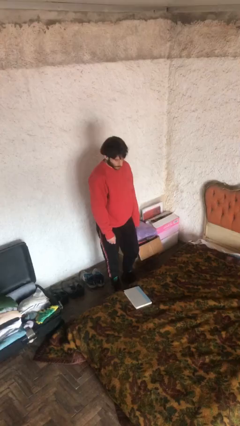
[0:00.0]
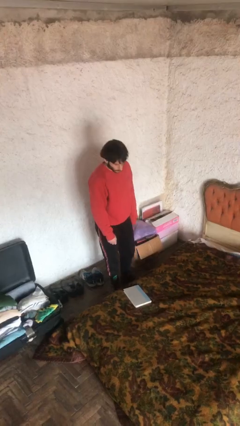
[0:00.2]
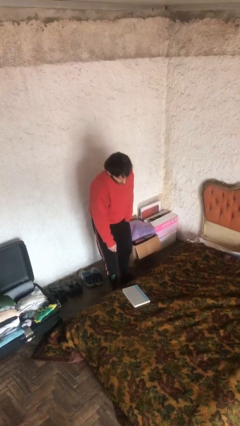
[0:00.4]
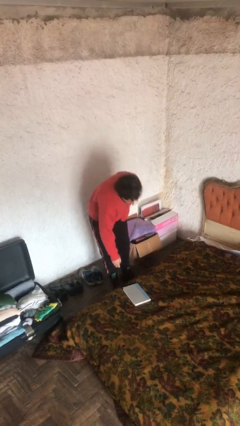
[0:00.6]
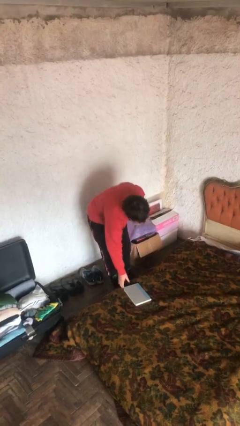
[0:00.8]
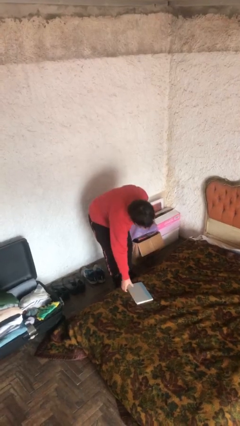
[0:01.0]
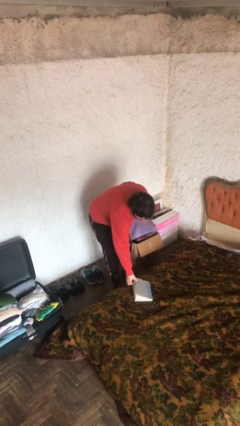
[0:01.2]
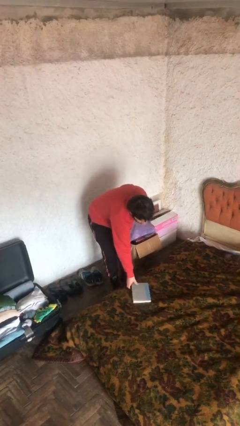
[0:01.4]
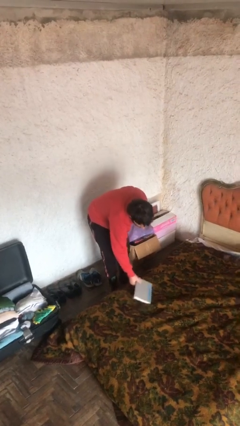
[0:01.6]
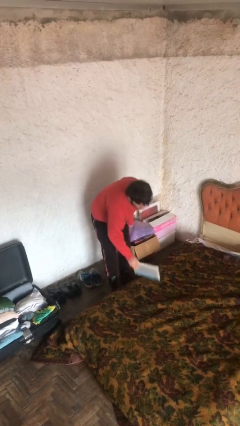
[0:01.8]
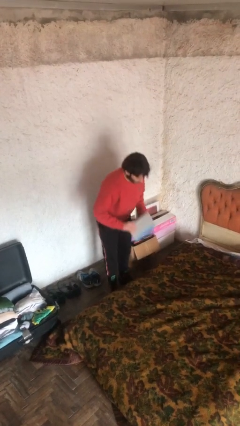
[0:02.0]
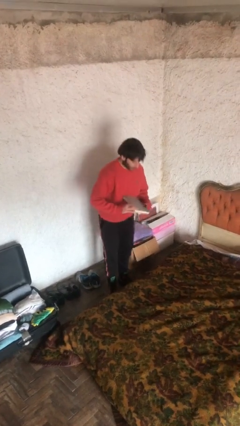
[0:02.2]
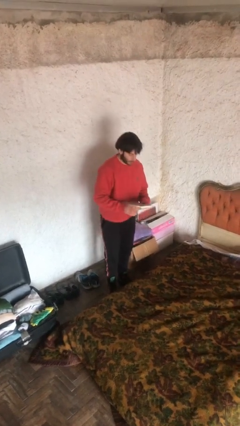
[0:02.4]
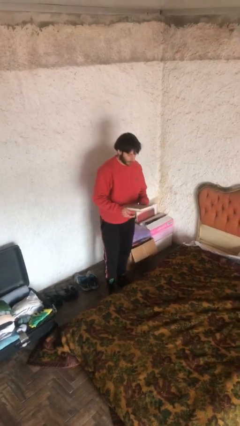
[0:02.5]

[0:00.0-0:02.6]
person picks up object from bed

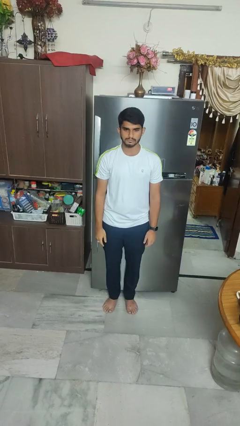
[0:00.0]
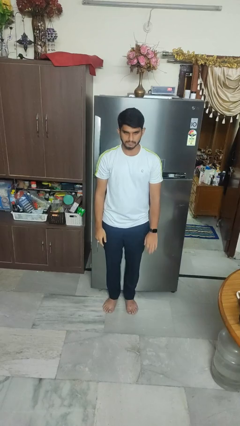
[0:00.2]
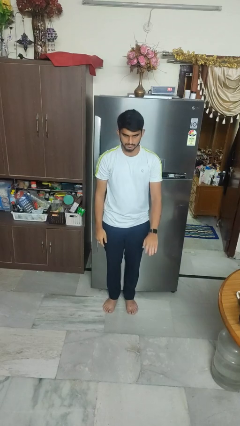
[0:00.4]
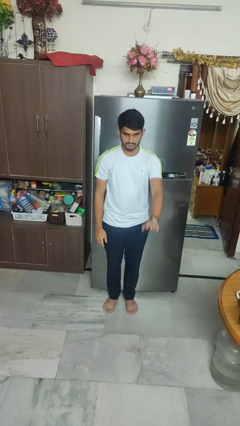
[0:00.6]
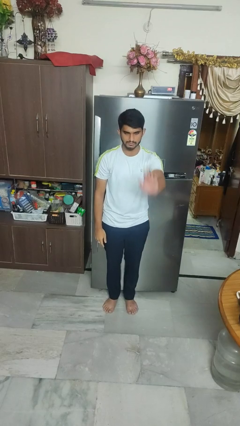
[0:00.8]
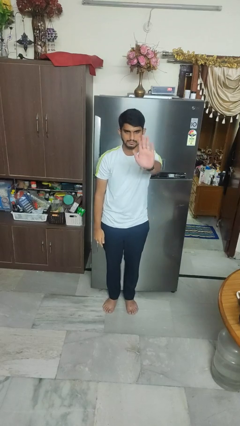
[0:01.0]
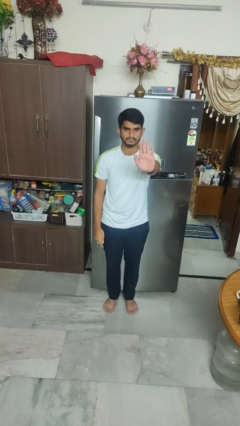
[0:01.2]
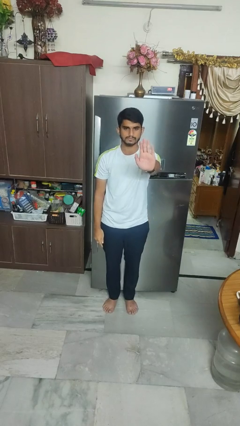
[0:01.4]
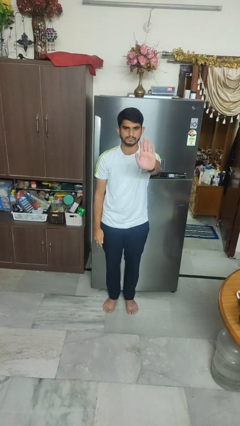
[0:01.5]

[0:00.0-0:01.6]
person gestures stop

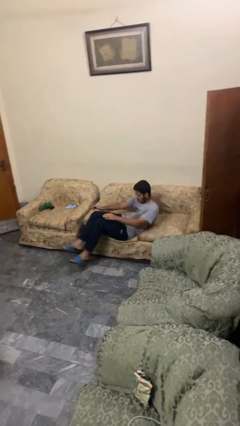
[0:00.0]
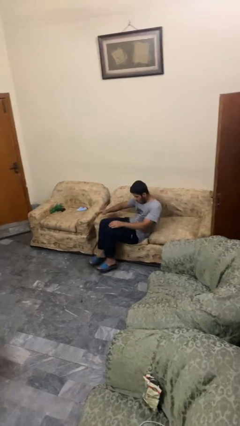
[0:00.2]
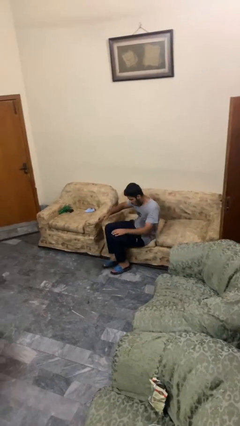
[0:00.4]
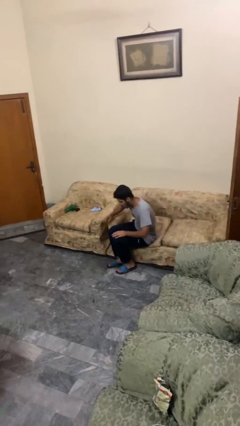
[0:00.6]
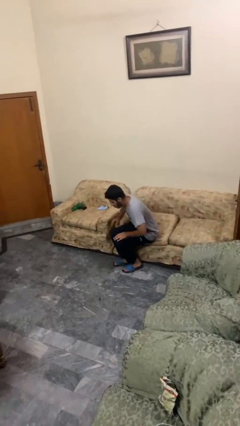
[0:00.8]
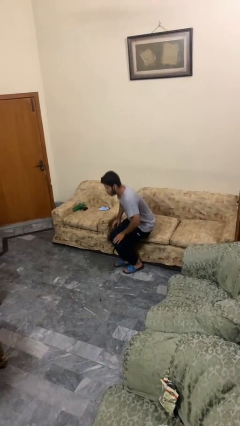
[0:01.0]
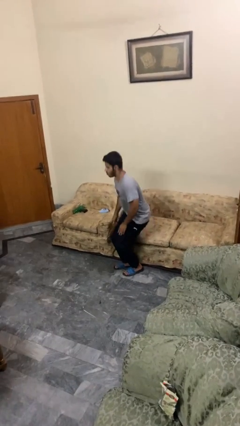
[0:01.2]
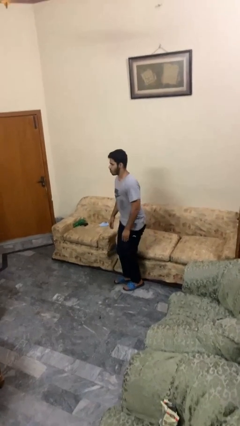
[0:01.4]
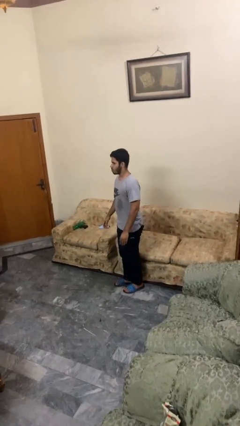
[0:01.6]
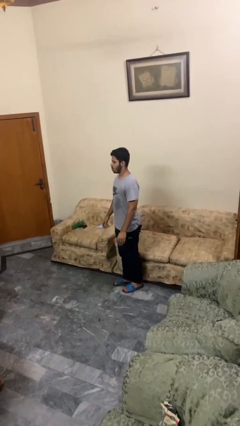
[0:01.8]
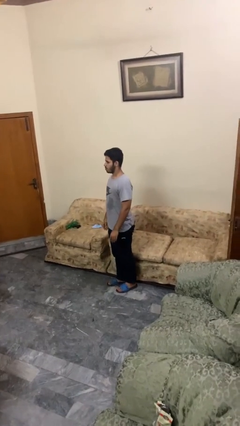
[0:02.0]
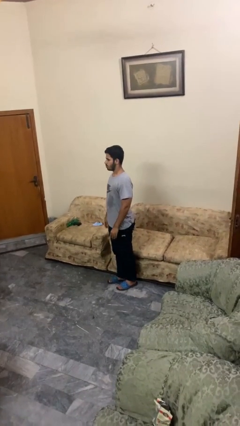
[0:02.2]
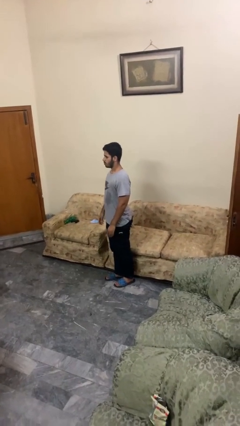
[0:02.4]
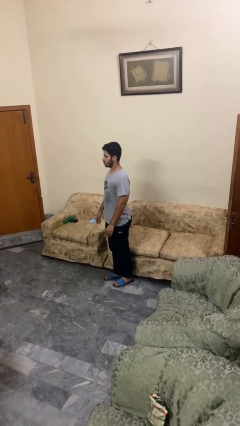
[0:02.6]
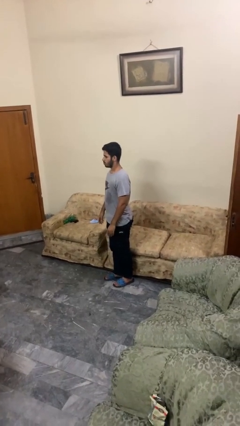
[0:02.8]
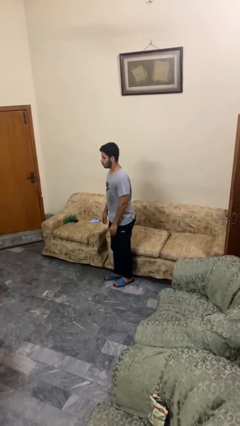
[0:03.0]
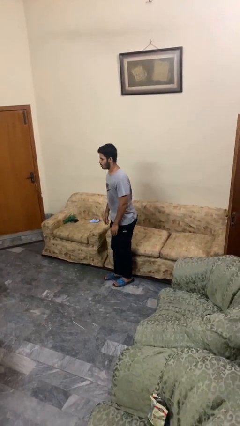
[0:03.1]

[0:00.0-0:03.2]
person stands up

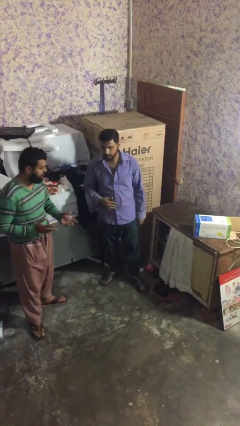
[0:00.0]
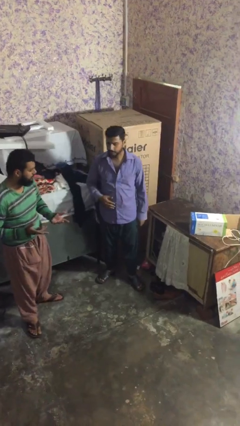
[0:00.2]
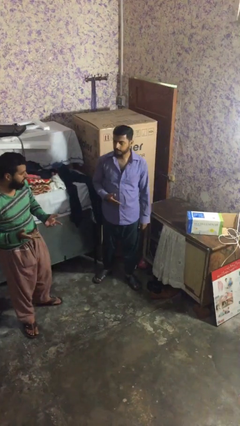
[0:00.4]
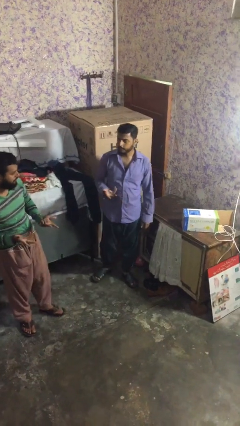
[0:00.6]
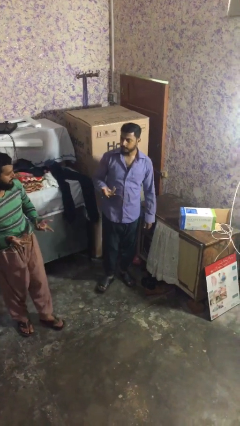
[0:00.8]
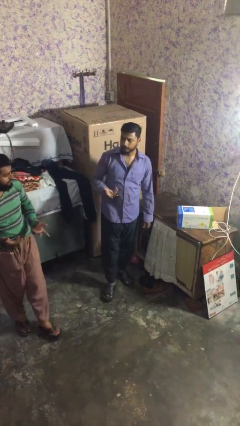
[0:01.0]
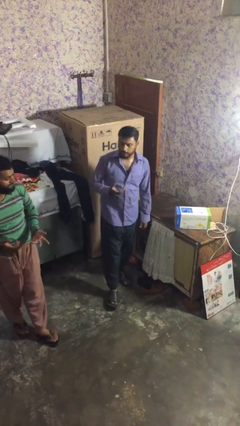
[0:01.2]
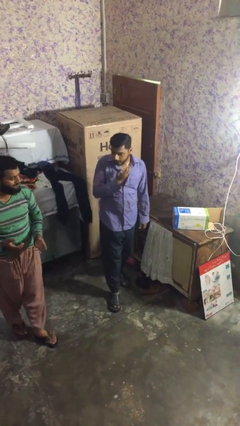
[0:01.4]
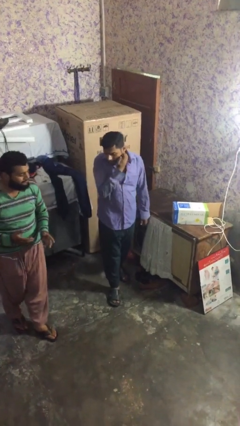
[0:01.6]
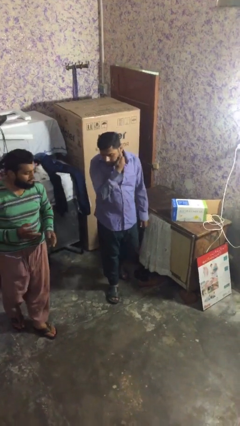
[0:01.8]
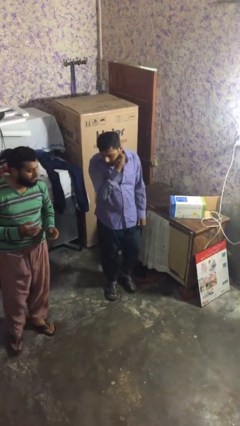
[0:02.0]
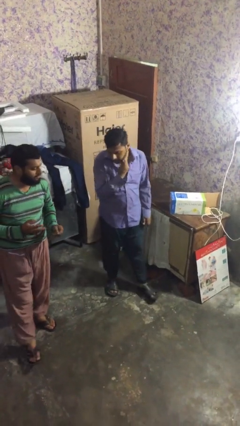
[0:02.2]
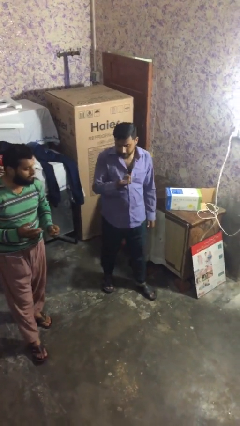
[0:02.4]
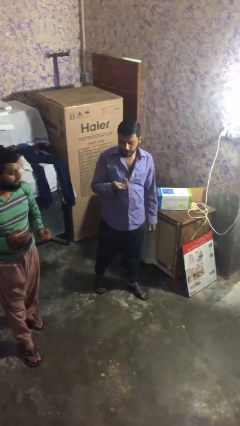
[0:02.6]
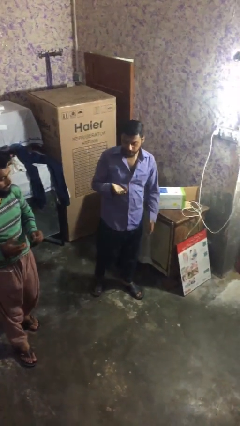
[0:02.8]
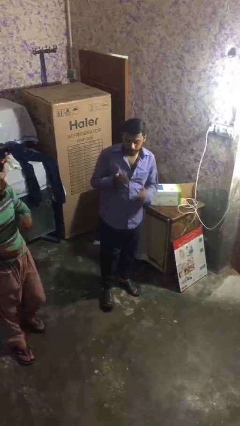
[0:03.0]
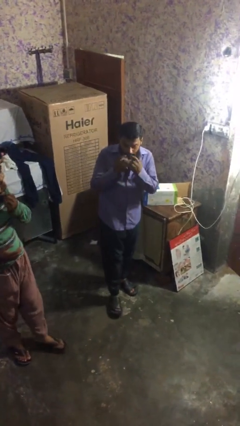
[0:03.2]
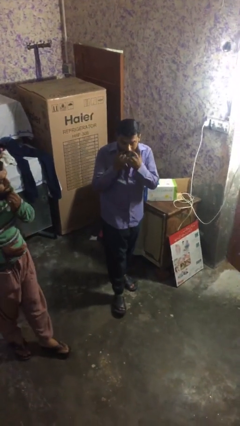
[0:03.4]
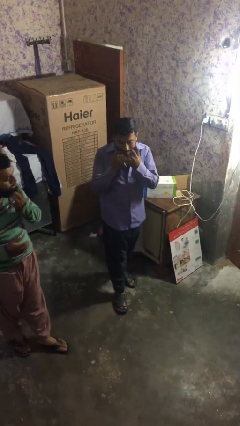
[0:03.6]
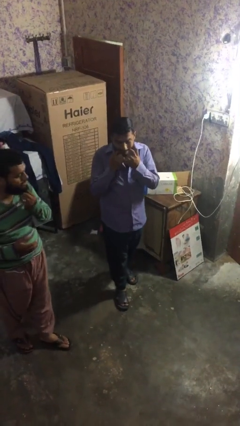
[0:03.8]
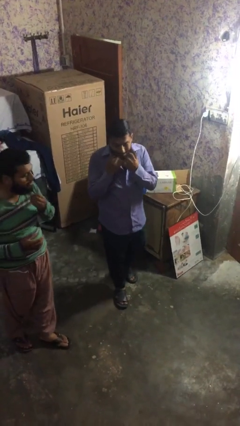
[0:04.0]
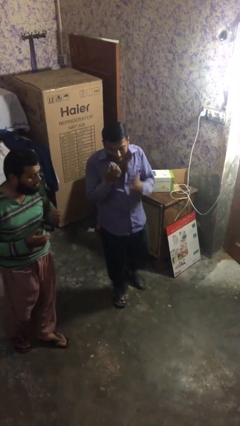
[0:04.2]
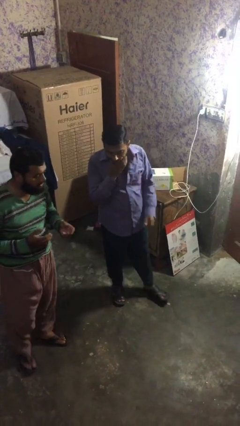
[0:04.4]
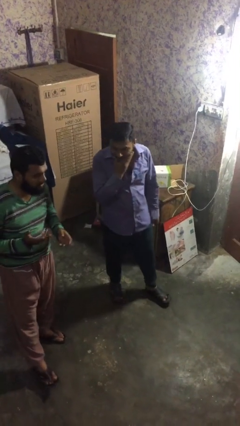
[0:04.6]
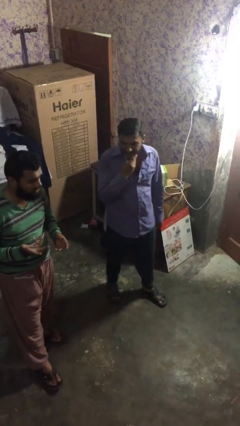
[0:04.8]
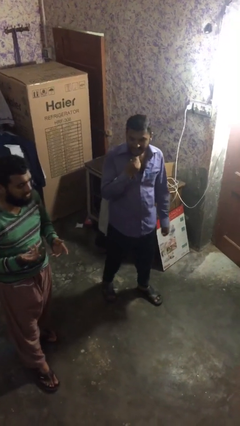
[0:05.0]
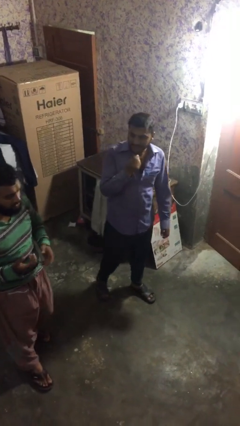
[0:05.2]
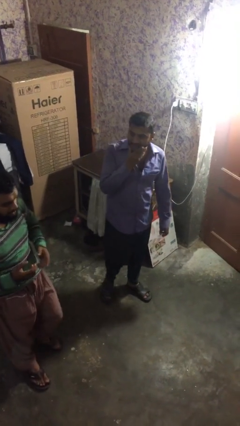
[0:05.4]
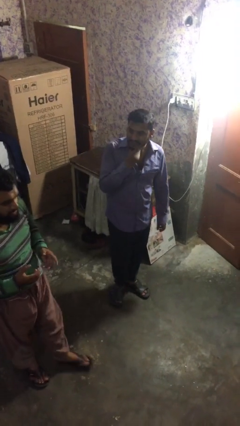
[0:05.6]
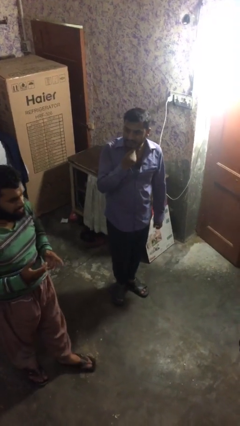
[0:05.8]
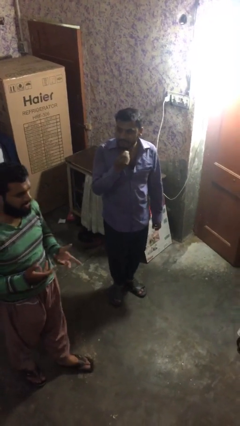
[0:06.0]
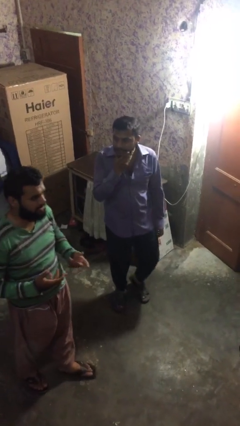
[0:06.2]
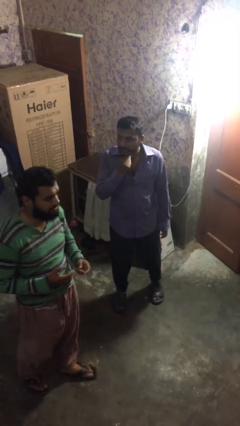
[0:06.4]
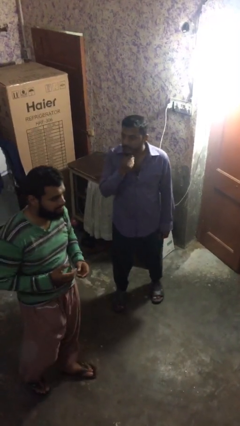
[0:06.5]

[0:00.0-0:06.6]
person talks to person

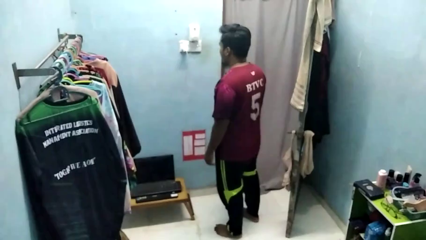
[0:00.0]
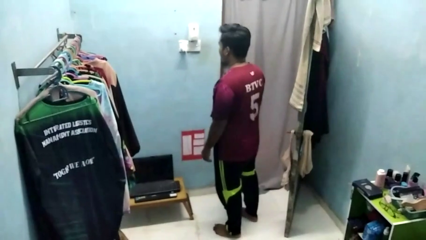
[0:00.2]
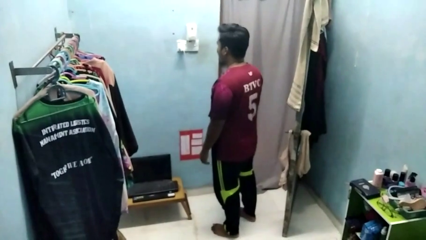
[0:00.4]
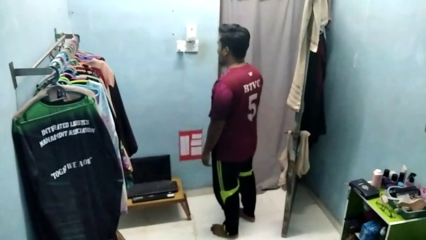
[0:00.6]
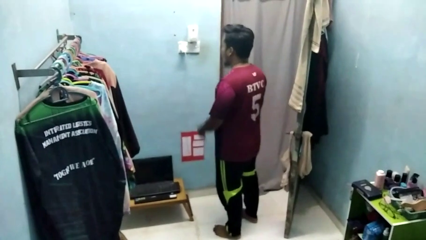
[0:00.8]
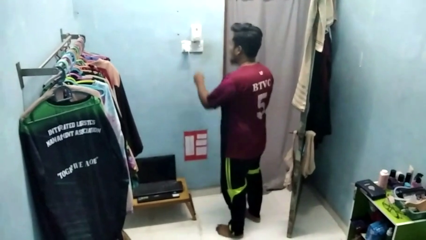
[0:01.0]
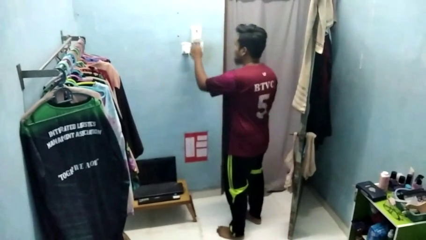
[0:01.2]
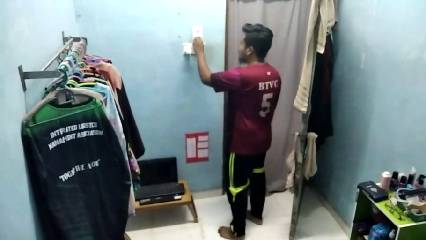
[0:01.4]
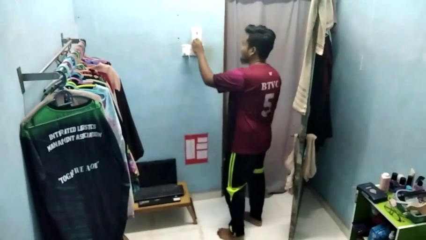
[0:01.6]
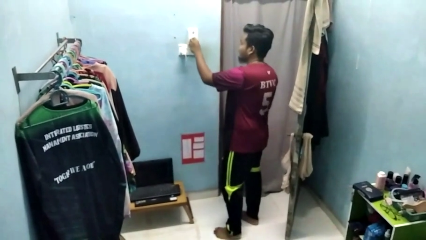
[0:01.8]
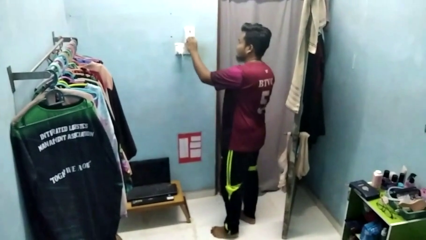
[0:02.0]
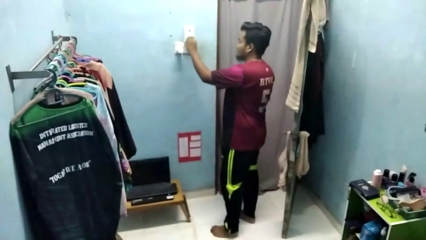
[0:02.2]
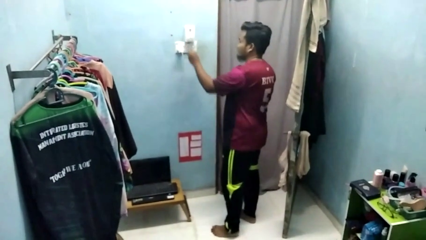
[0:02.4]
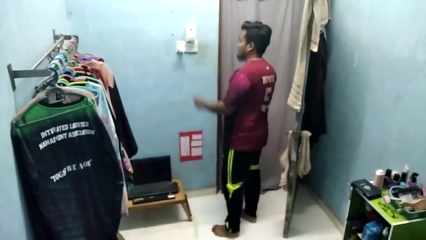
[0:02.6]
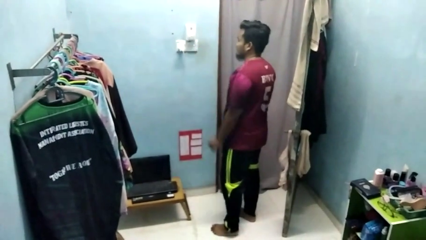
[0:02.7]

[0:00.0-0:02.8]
person adjusts thermostat

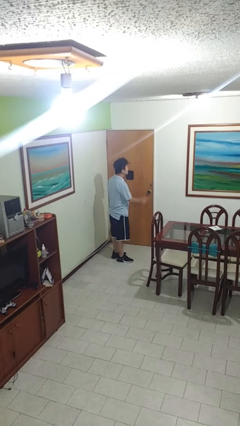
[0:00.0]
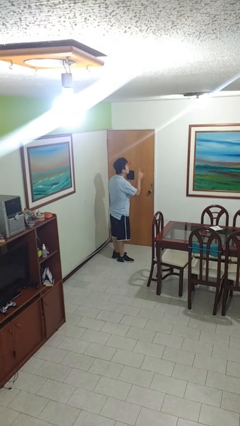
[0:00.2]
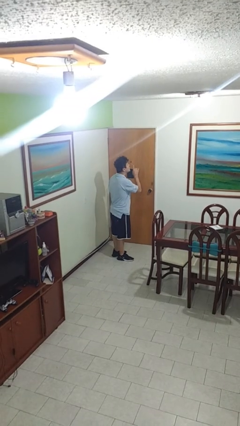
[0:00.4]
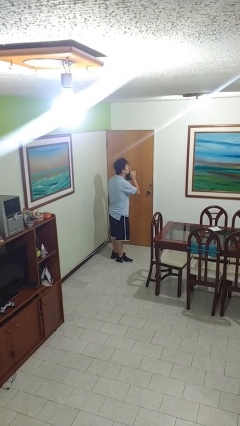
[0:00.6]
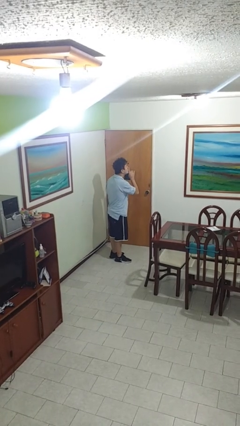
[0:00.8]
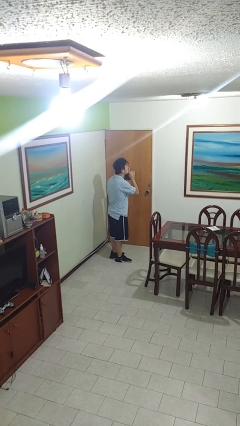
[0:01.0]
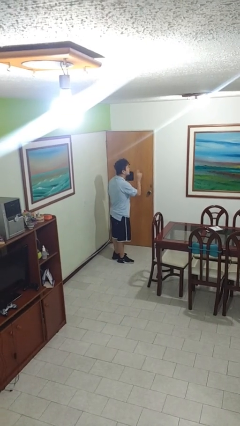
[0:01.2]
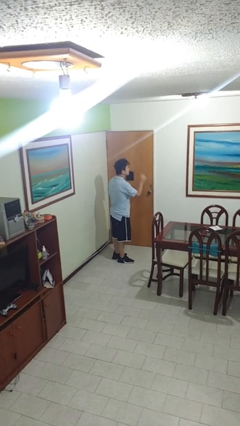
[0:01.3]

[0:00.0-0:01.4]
person gestures be quiet
